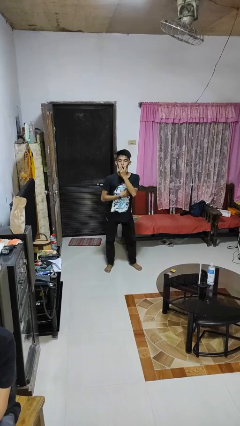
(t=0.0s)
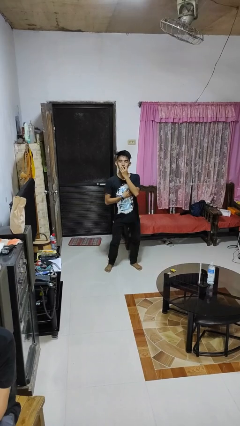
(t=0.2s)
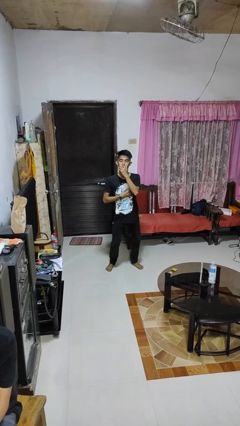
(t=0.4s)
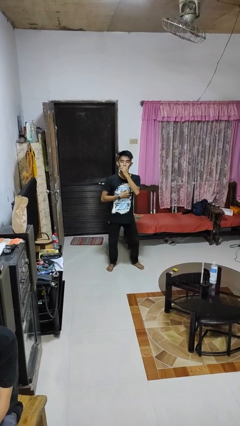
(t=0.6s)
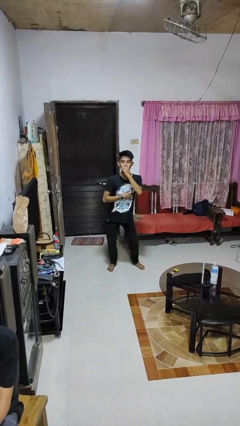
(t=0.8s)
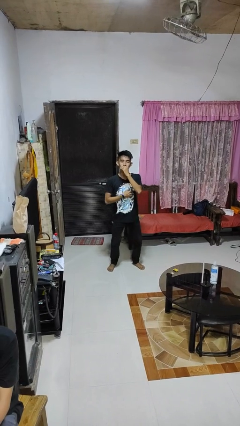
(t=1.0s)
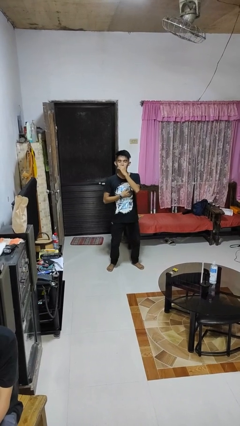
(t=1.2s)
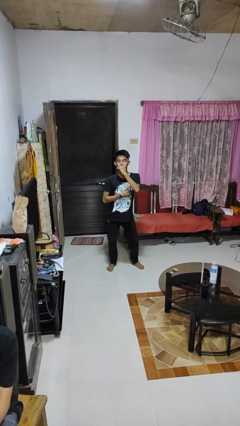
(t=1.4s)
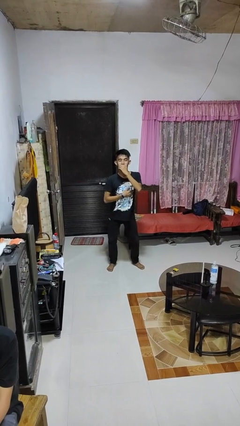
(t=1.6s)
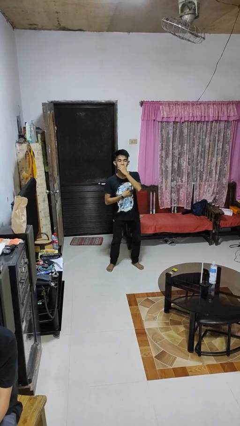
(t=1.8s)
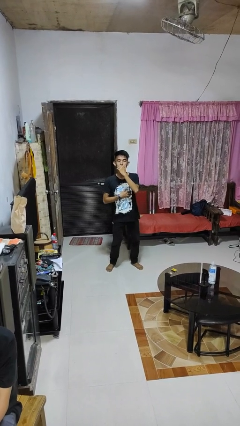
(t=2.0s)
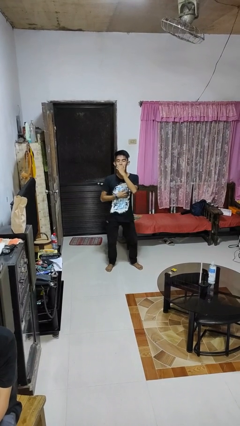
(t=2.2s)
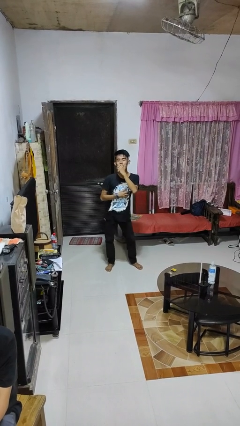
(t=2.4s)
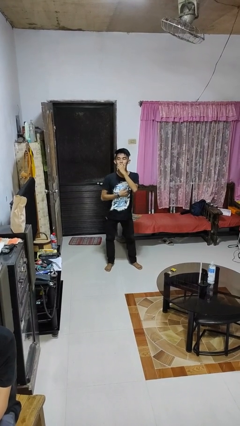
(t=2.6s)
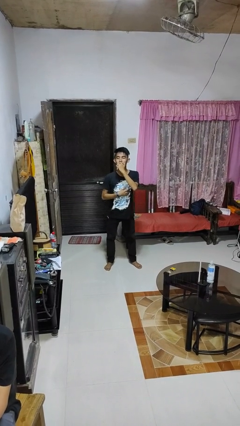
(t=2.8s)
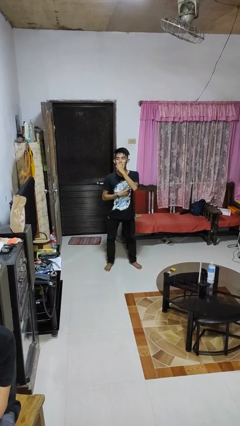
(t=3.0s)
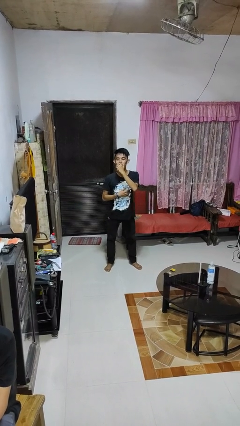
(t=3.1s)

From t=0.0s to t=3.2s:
person wiggles hips

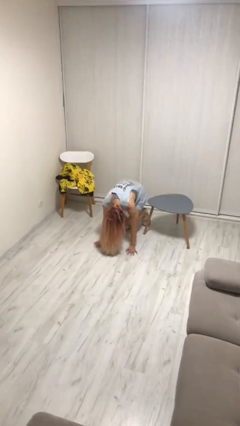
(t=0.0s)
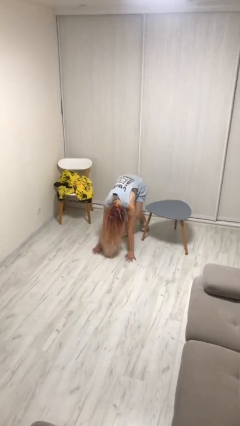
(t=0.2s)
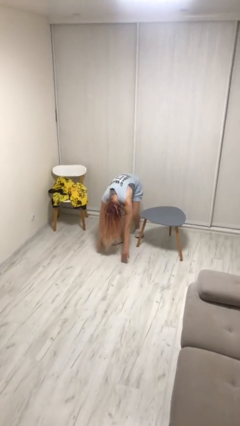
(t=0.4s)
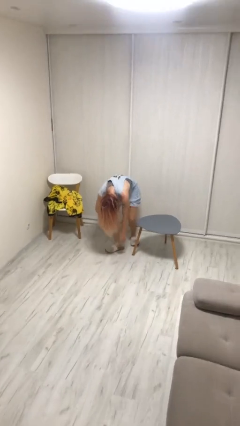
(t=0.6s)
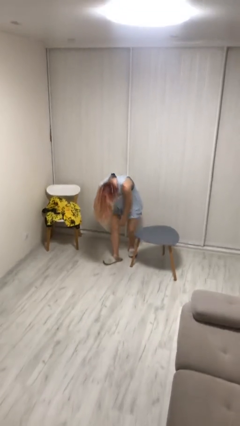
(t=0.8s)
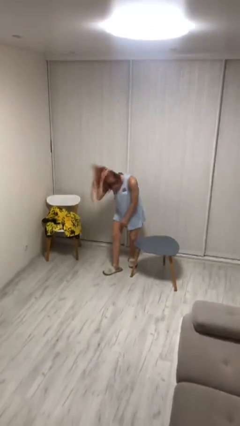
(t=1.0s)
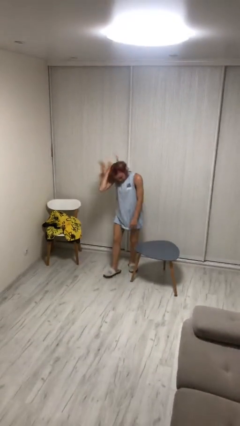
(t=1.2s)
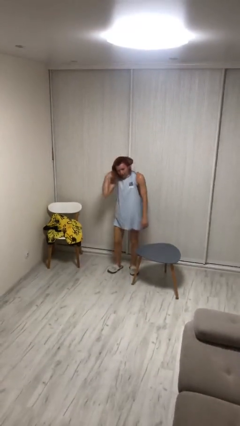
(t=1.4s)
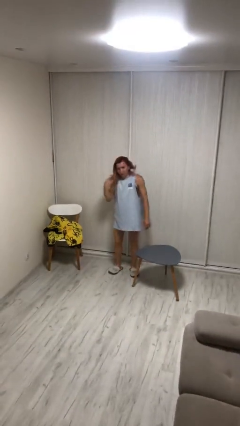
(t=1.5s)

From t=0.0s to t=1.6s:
person stands up from floor

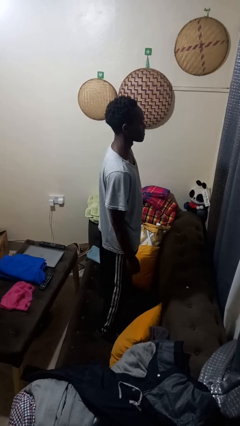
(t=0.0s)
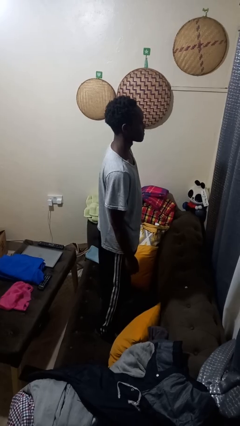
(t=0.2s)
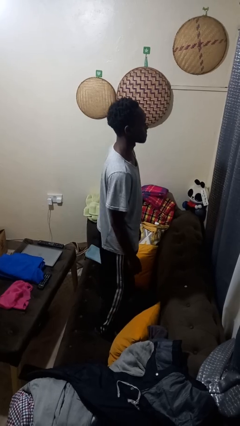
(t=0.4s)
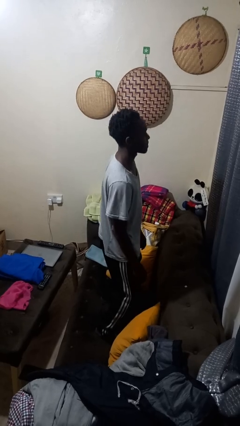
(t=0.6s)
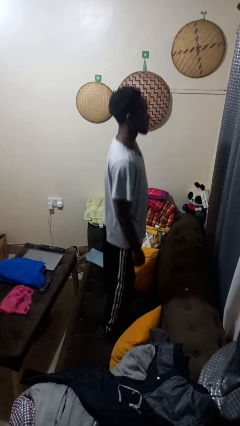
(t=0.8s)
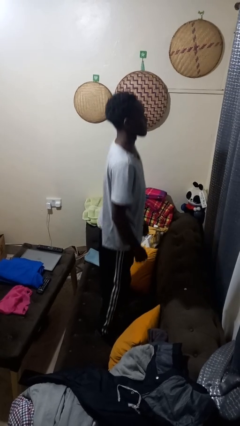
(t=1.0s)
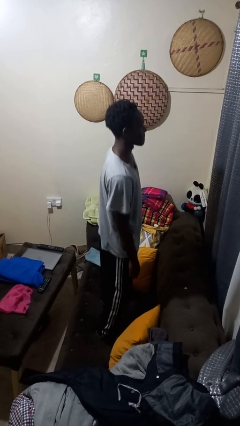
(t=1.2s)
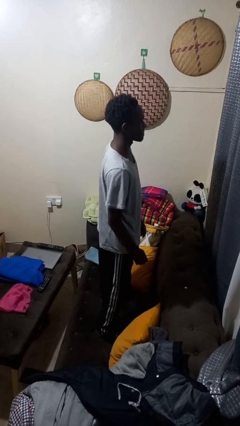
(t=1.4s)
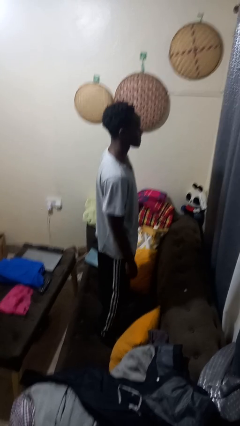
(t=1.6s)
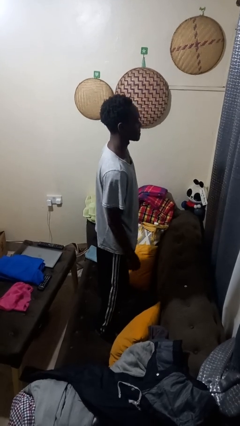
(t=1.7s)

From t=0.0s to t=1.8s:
person jumps on couch

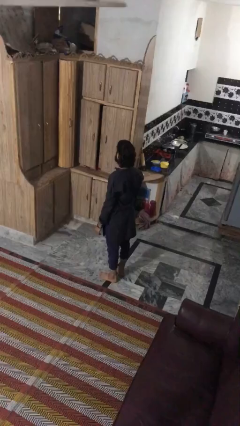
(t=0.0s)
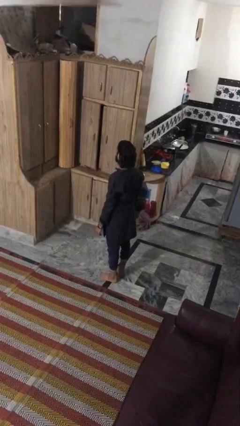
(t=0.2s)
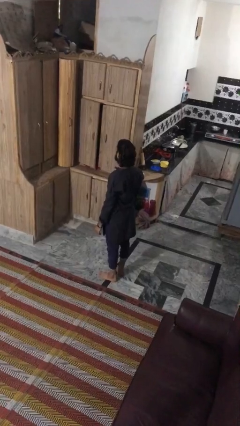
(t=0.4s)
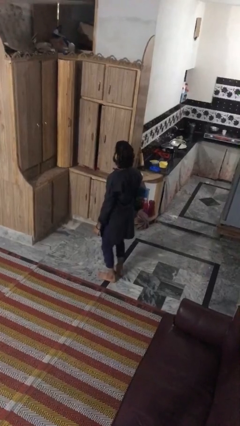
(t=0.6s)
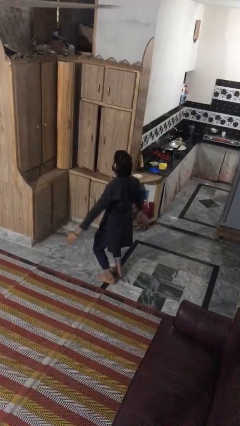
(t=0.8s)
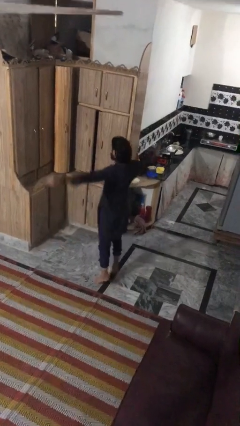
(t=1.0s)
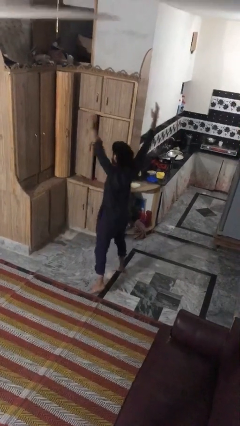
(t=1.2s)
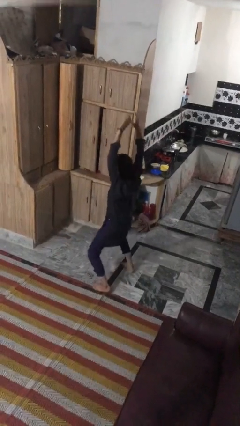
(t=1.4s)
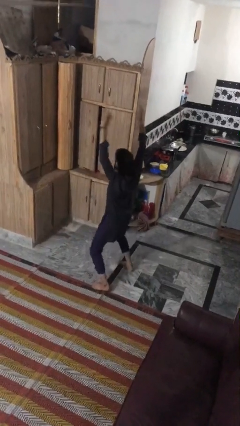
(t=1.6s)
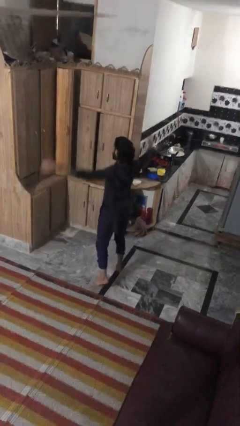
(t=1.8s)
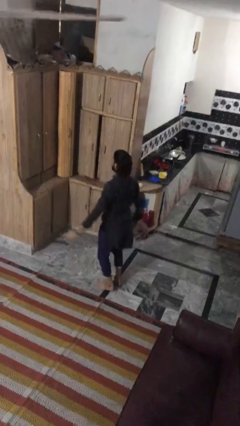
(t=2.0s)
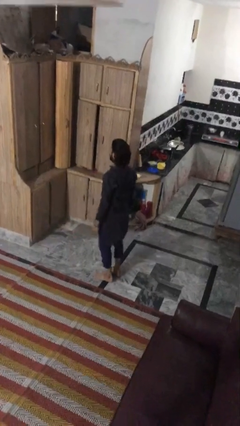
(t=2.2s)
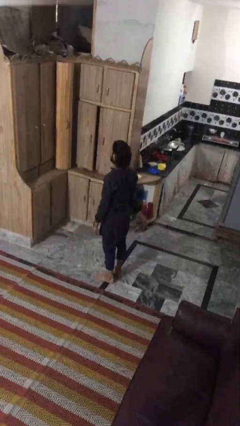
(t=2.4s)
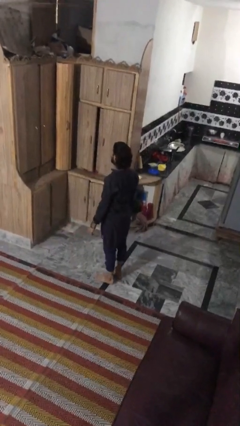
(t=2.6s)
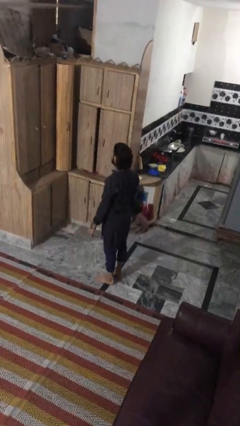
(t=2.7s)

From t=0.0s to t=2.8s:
person exercises with jumping jacks

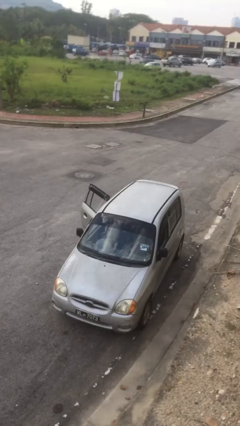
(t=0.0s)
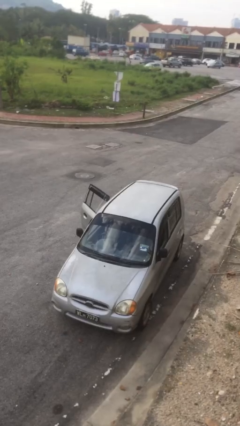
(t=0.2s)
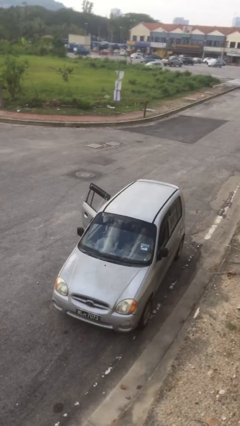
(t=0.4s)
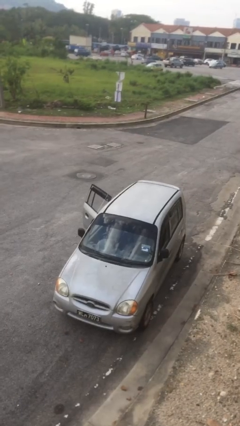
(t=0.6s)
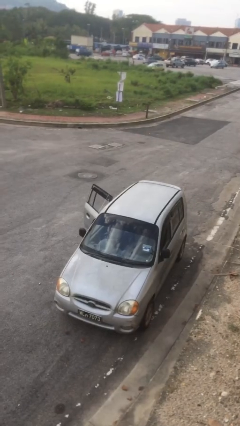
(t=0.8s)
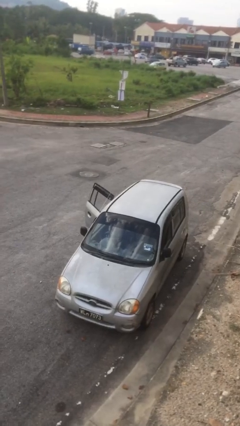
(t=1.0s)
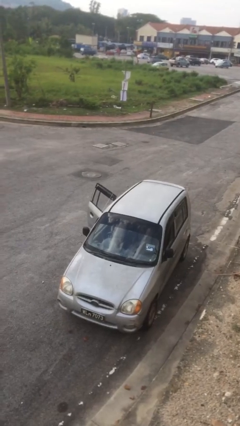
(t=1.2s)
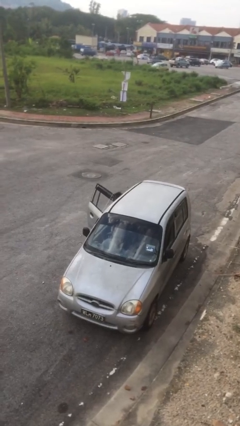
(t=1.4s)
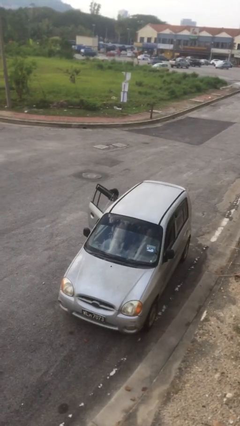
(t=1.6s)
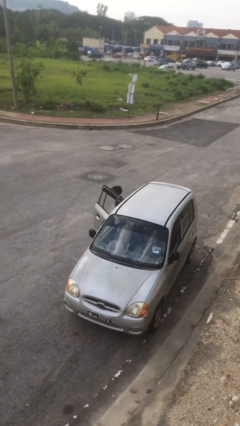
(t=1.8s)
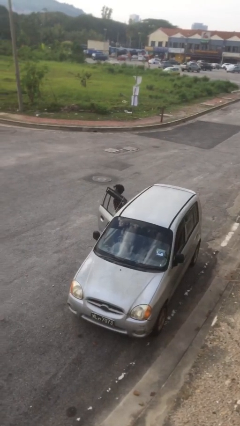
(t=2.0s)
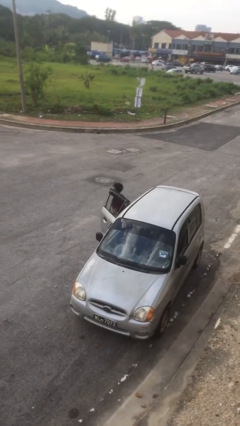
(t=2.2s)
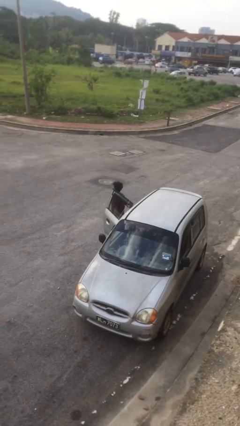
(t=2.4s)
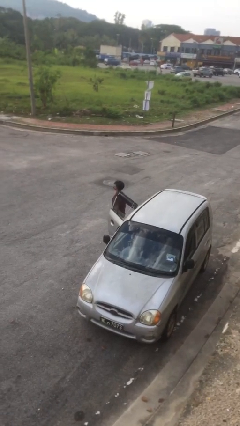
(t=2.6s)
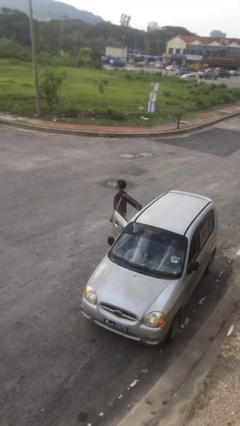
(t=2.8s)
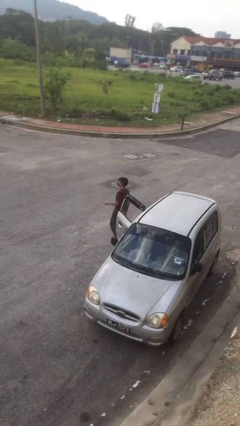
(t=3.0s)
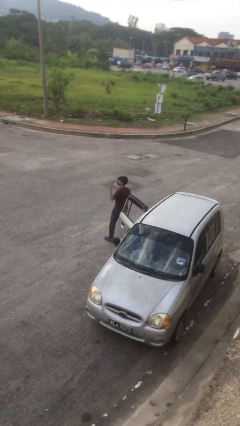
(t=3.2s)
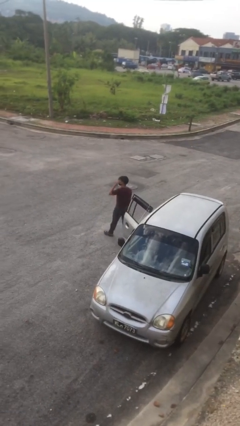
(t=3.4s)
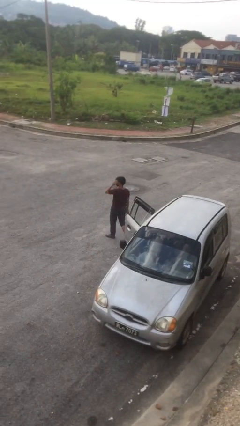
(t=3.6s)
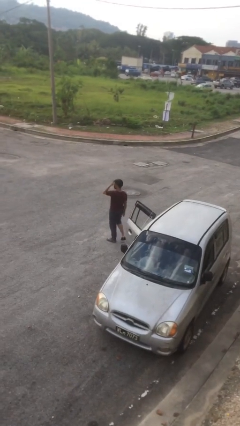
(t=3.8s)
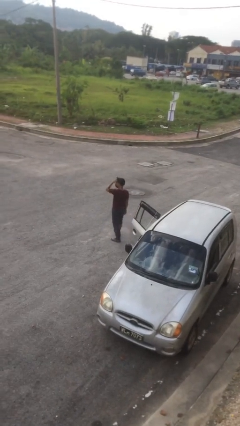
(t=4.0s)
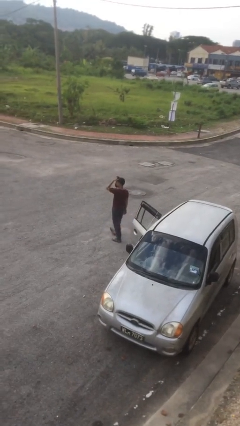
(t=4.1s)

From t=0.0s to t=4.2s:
person exits car

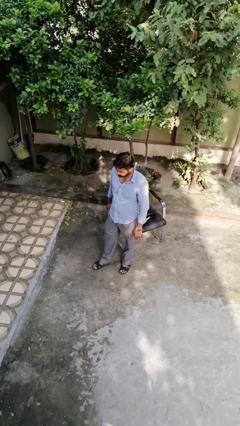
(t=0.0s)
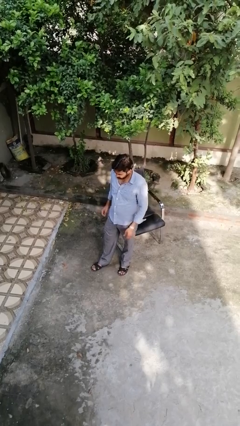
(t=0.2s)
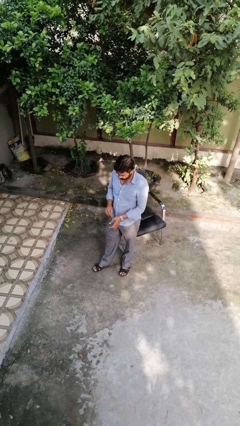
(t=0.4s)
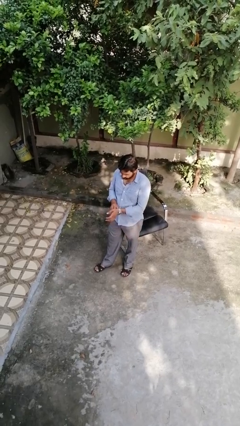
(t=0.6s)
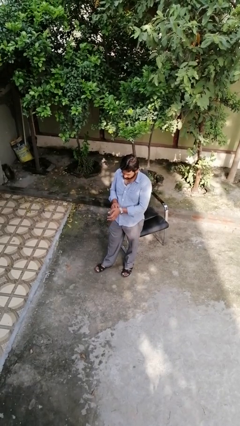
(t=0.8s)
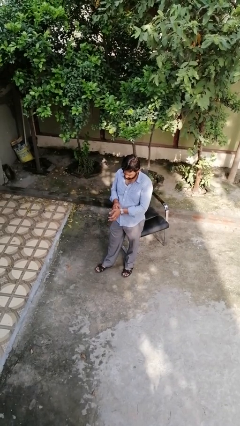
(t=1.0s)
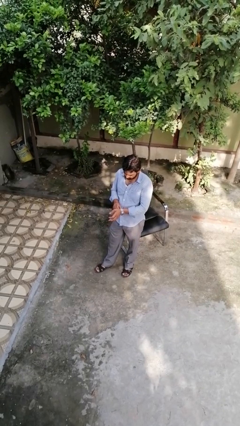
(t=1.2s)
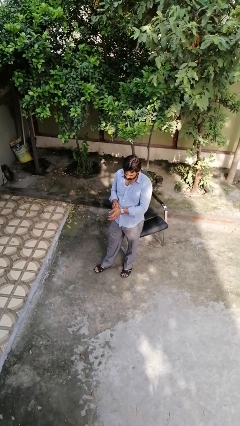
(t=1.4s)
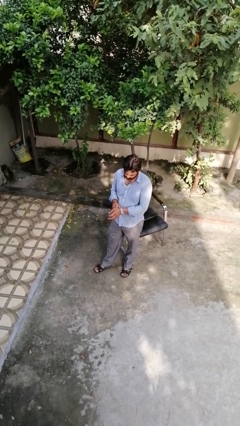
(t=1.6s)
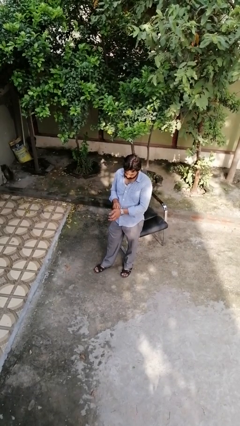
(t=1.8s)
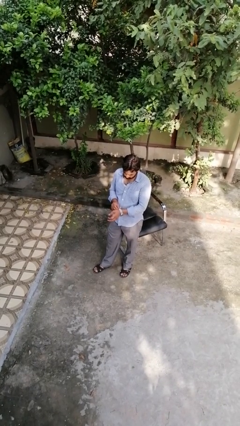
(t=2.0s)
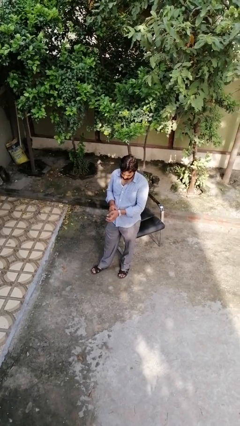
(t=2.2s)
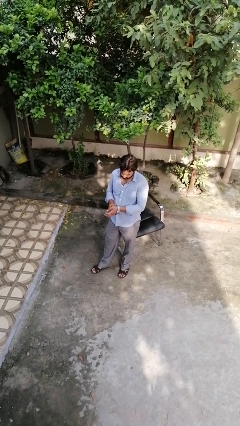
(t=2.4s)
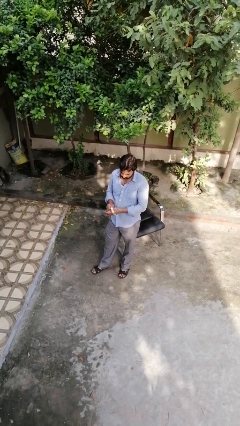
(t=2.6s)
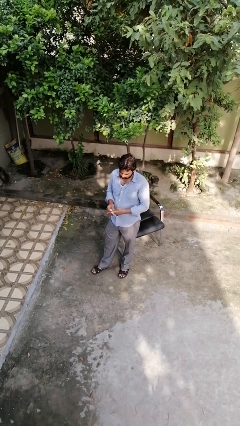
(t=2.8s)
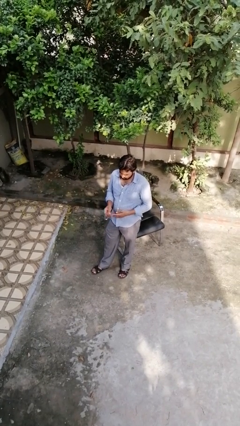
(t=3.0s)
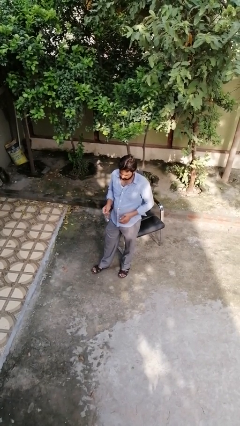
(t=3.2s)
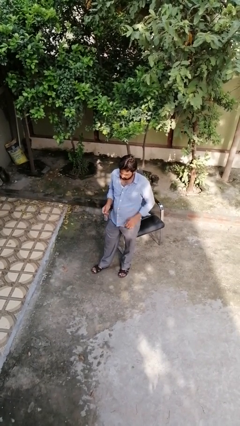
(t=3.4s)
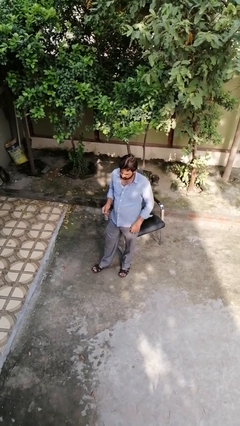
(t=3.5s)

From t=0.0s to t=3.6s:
person takes off wristwatch
